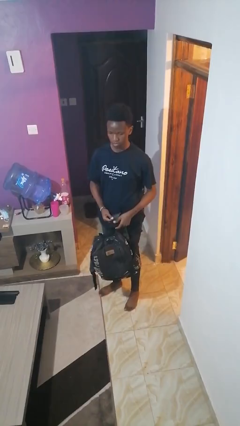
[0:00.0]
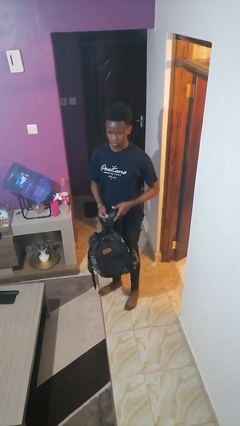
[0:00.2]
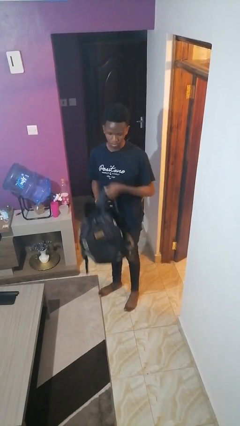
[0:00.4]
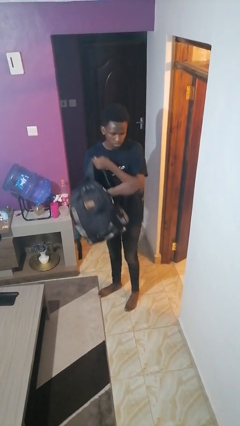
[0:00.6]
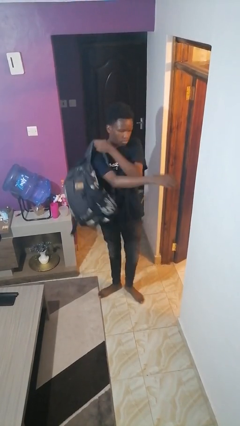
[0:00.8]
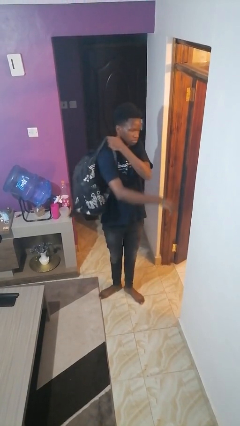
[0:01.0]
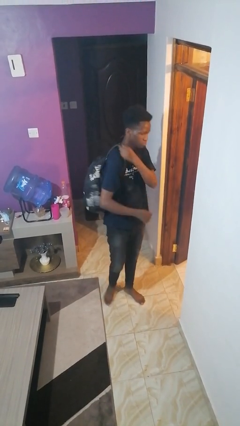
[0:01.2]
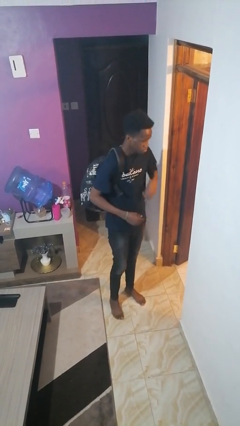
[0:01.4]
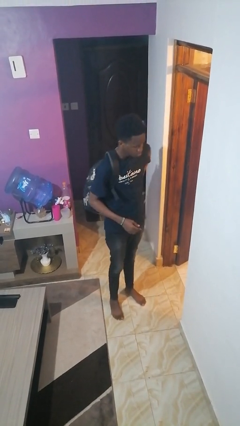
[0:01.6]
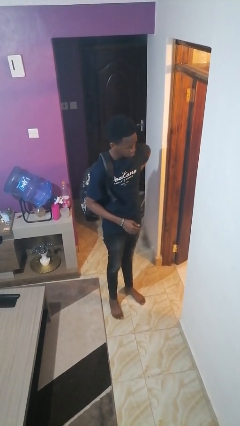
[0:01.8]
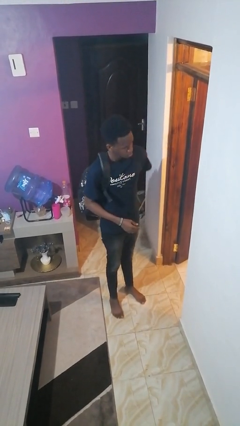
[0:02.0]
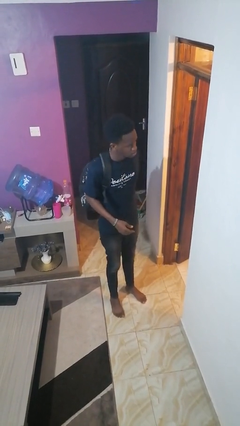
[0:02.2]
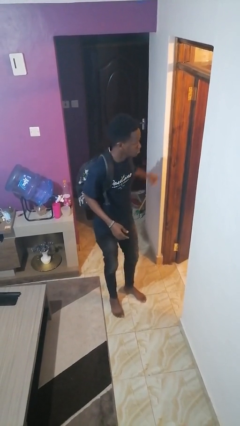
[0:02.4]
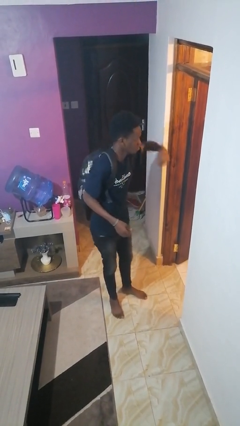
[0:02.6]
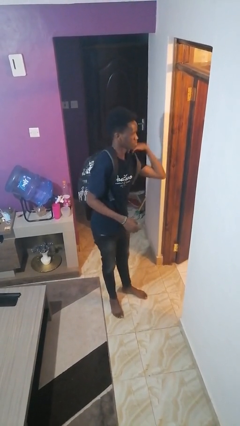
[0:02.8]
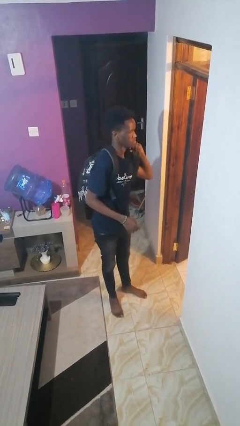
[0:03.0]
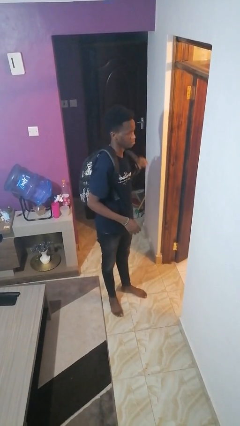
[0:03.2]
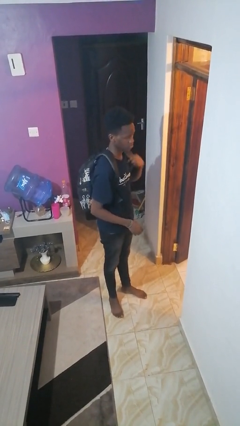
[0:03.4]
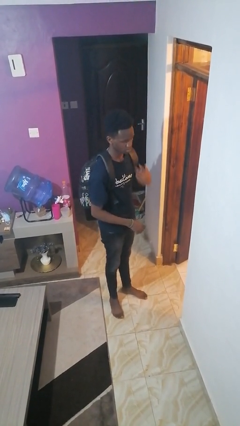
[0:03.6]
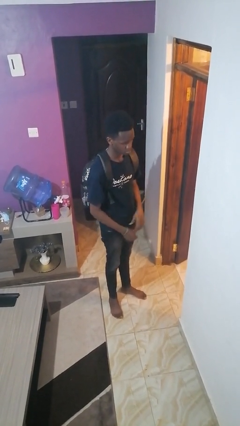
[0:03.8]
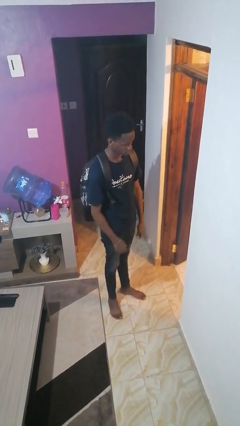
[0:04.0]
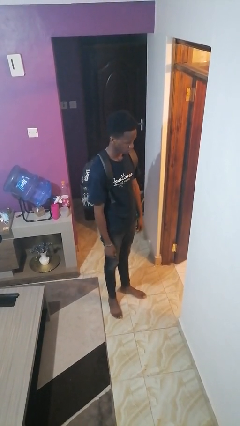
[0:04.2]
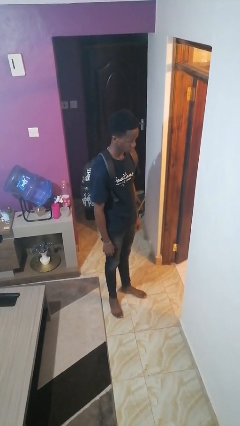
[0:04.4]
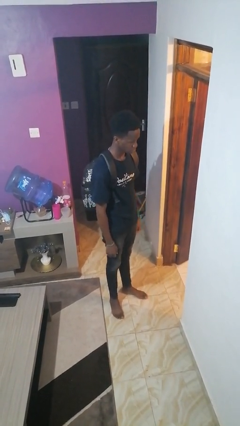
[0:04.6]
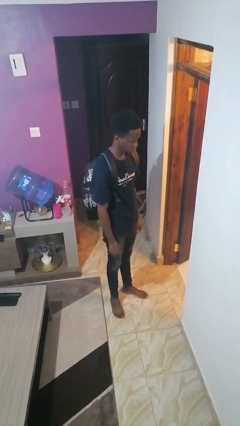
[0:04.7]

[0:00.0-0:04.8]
person puts on backpack

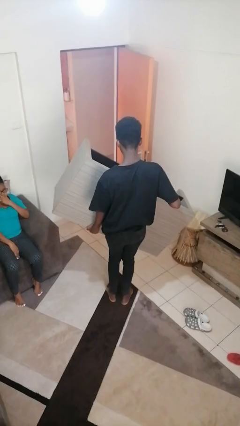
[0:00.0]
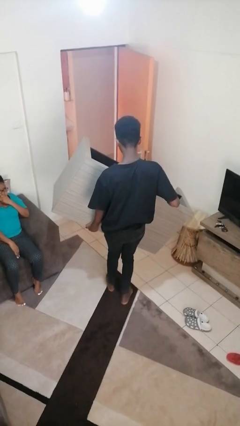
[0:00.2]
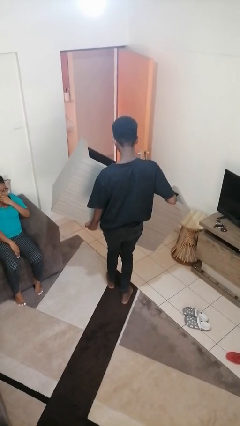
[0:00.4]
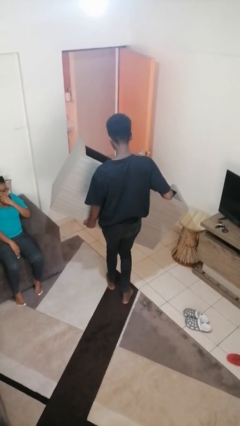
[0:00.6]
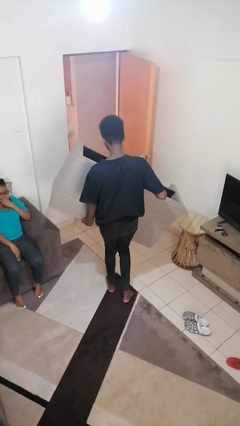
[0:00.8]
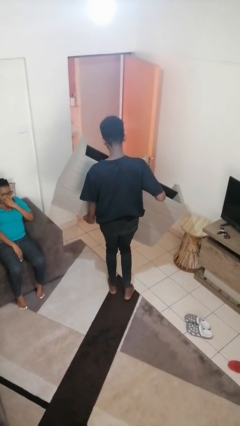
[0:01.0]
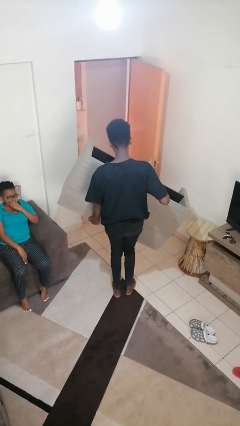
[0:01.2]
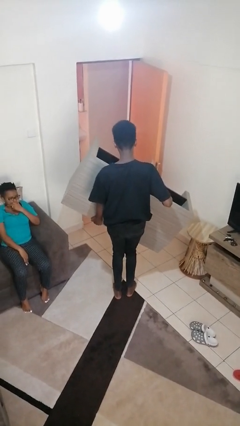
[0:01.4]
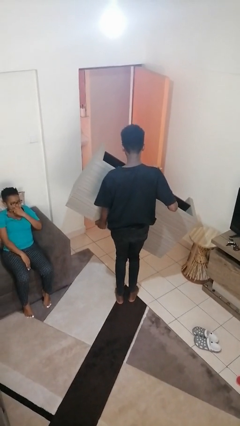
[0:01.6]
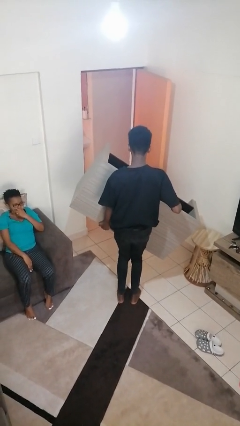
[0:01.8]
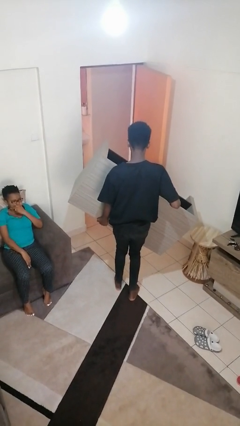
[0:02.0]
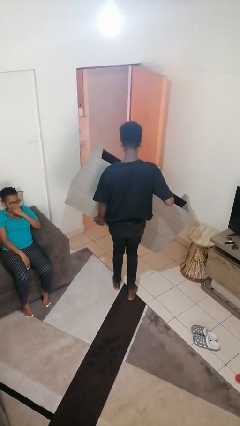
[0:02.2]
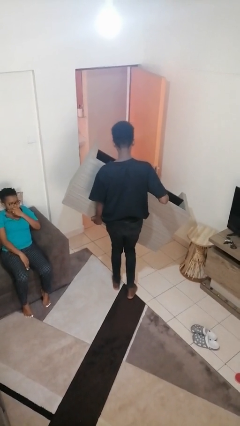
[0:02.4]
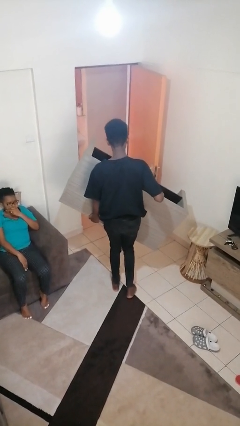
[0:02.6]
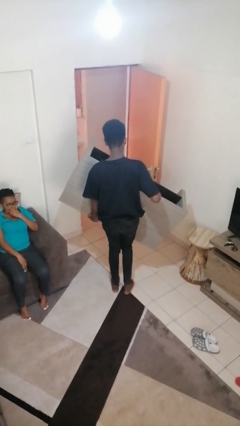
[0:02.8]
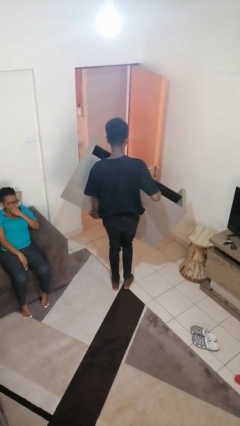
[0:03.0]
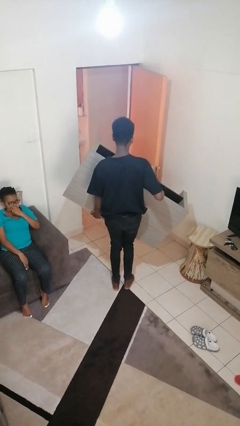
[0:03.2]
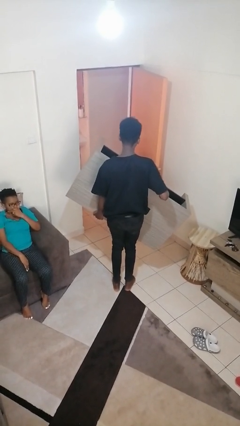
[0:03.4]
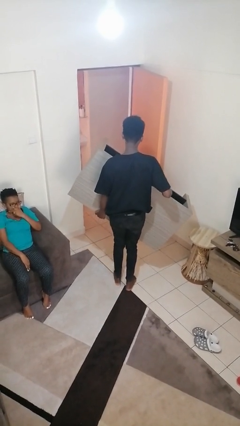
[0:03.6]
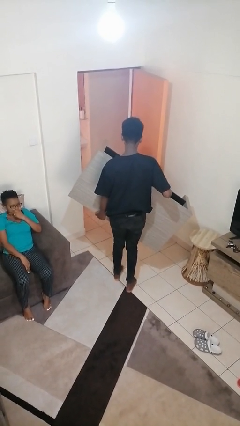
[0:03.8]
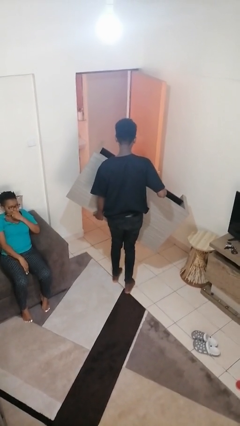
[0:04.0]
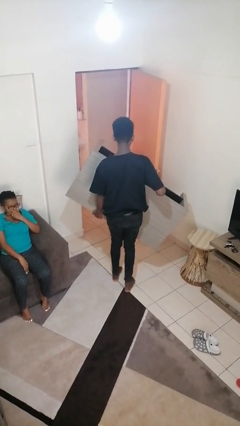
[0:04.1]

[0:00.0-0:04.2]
person carries furniture

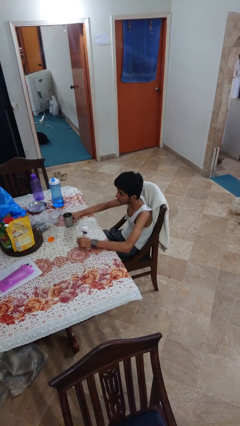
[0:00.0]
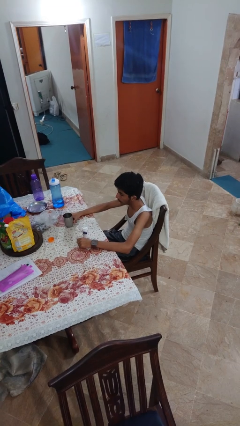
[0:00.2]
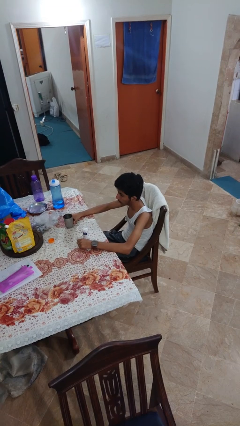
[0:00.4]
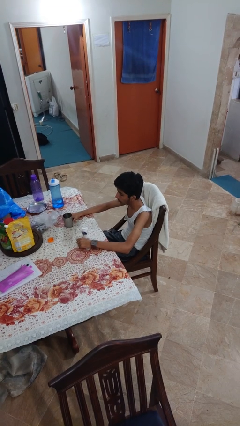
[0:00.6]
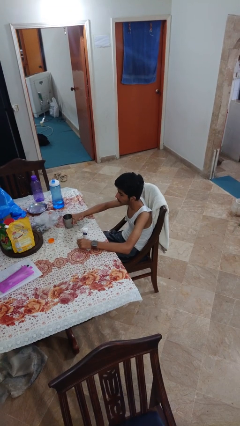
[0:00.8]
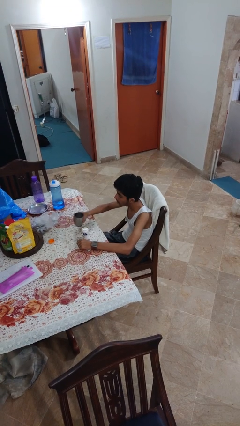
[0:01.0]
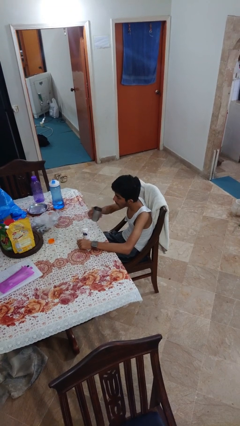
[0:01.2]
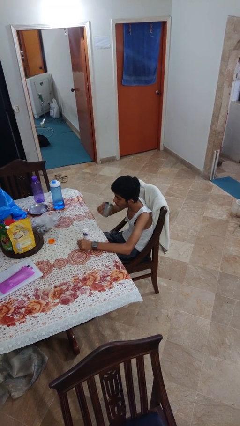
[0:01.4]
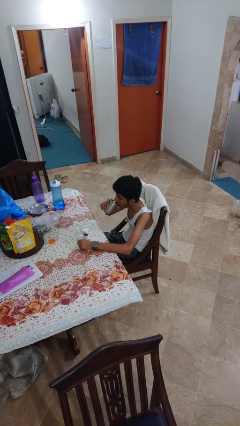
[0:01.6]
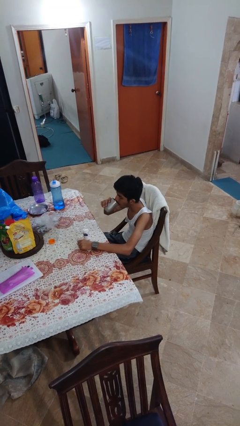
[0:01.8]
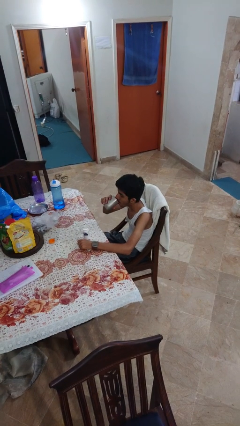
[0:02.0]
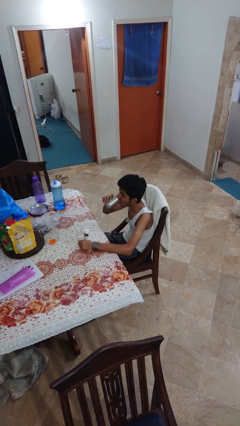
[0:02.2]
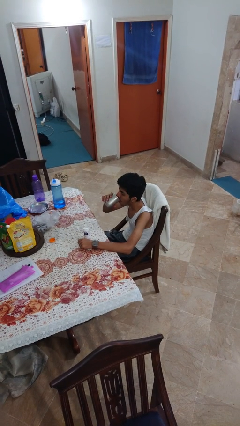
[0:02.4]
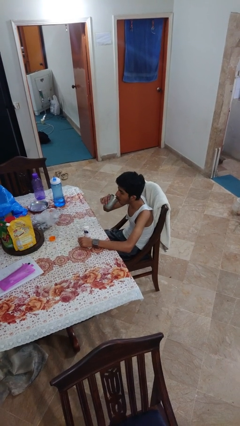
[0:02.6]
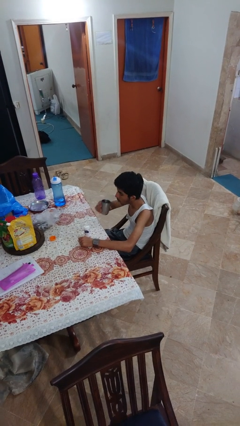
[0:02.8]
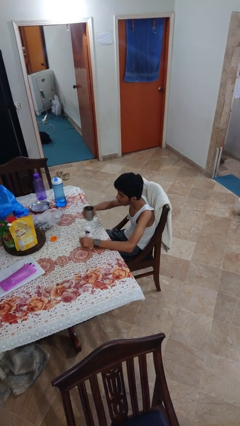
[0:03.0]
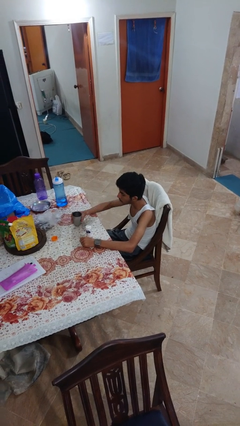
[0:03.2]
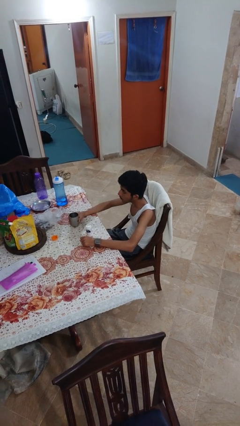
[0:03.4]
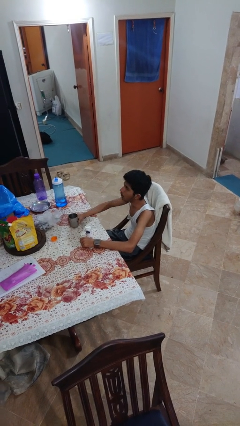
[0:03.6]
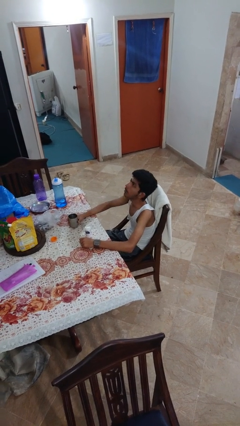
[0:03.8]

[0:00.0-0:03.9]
person drinks from cup

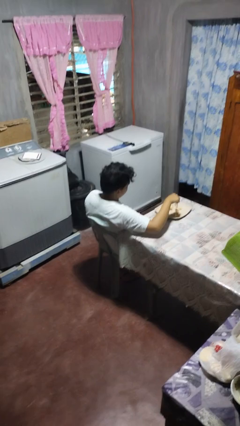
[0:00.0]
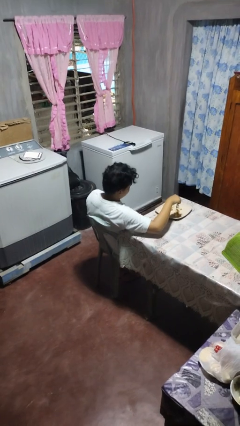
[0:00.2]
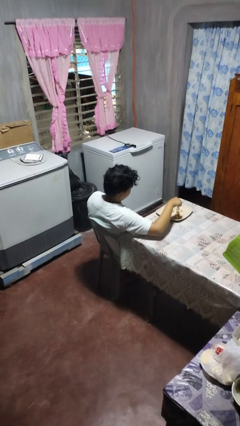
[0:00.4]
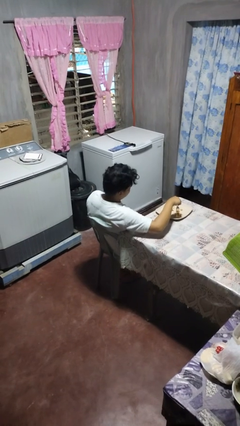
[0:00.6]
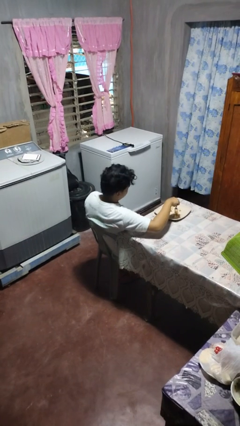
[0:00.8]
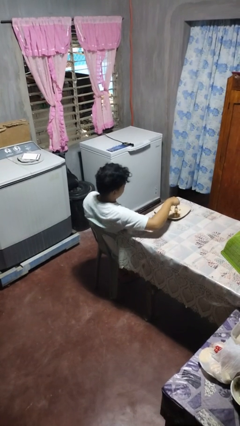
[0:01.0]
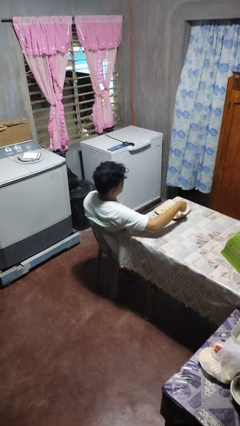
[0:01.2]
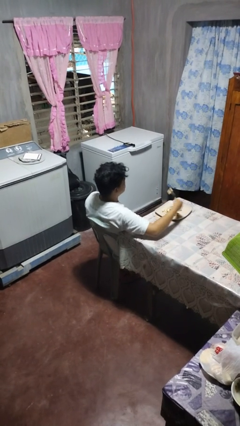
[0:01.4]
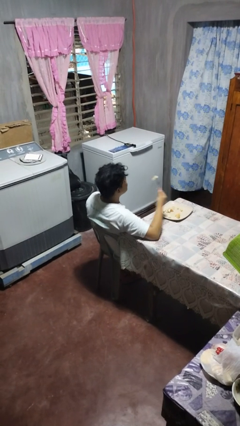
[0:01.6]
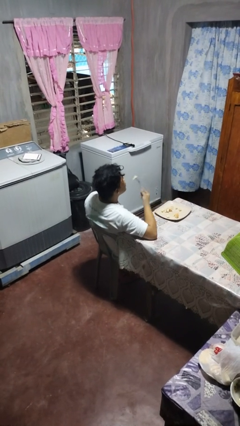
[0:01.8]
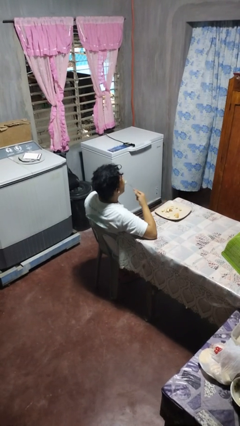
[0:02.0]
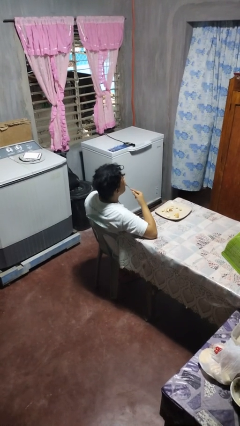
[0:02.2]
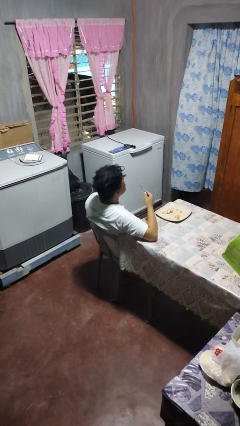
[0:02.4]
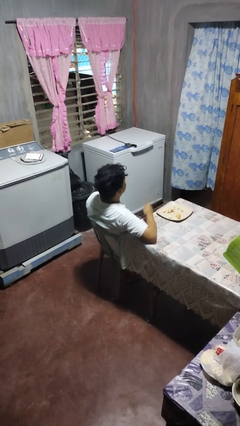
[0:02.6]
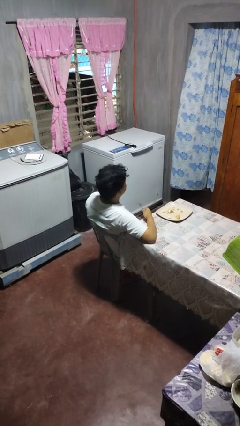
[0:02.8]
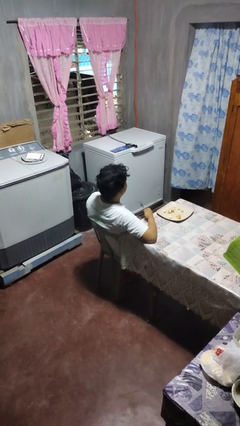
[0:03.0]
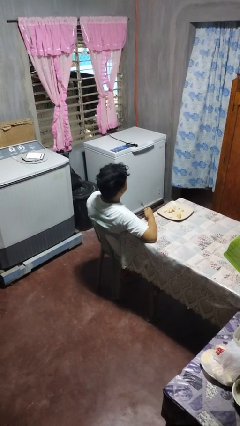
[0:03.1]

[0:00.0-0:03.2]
person eats with utensil

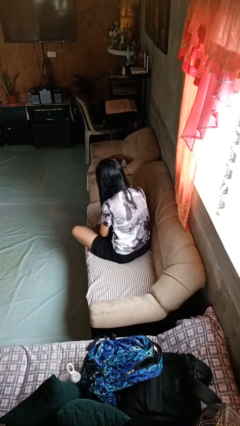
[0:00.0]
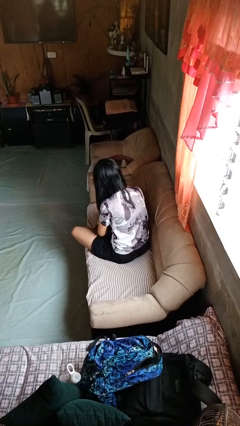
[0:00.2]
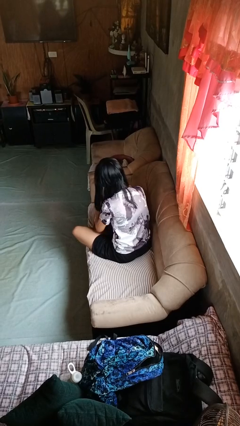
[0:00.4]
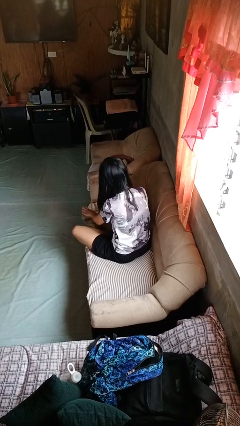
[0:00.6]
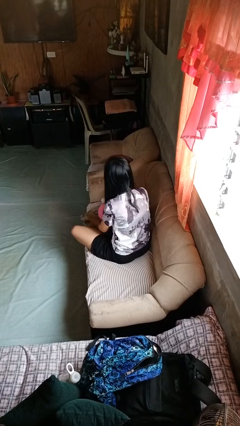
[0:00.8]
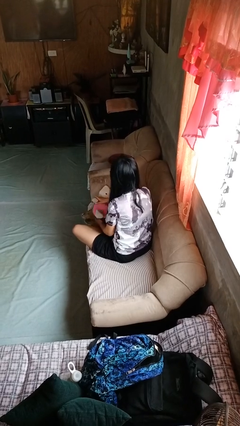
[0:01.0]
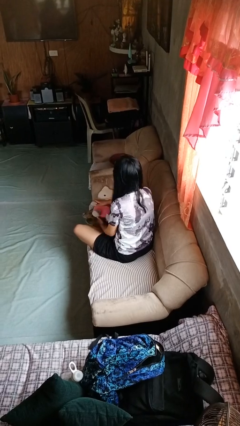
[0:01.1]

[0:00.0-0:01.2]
person searches in couch

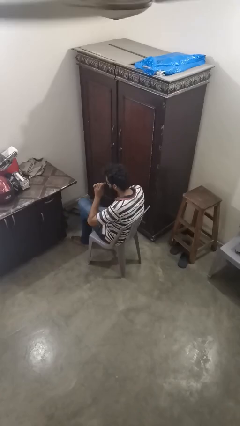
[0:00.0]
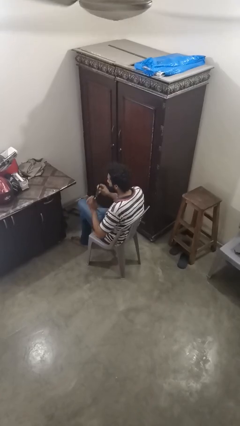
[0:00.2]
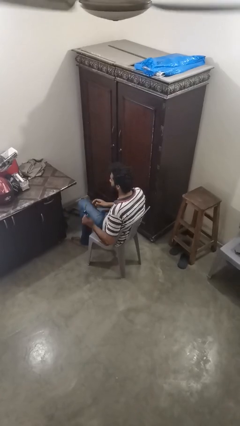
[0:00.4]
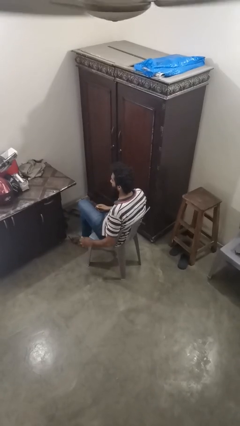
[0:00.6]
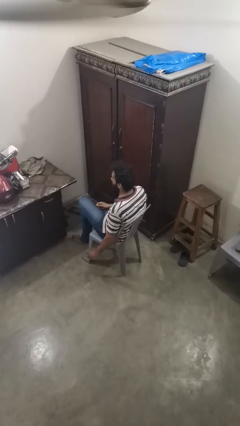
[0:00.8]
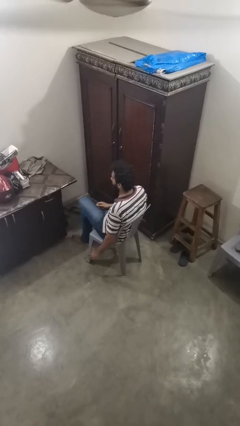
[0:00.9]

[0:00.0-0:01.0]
person takes off sunglasses
